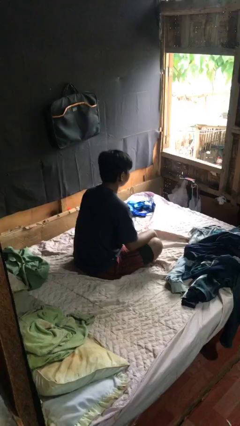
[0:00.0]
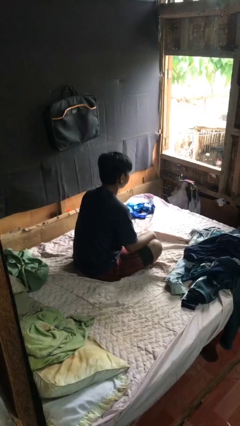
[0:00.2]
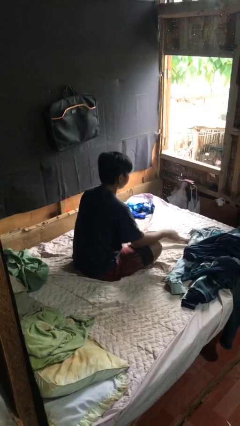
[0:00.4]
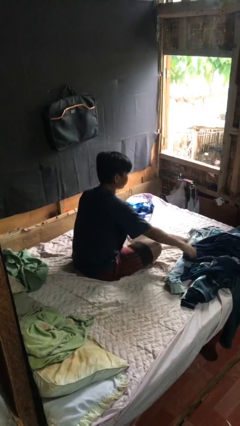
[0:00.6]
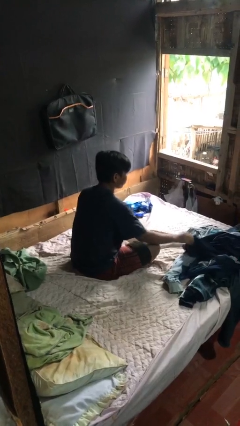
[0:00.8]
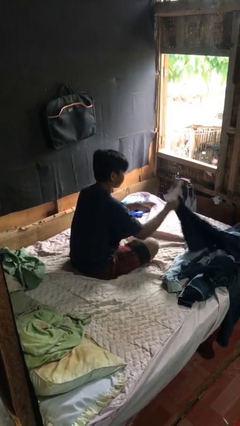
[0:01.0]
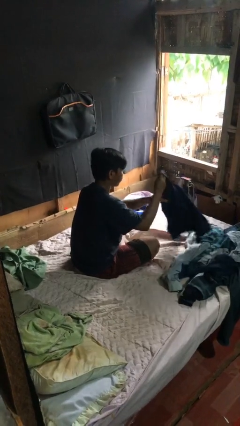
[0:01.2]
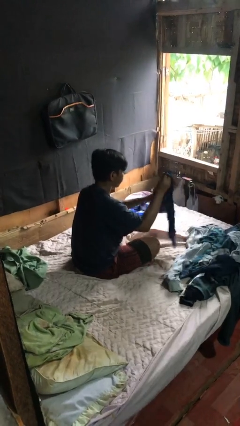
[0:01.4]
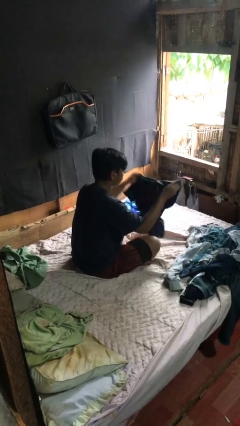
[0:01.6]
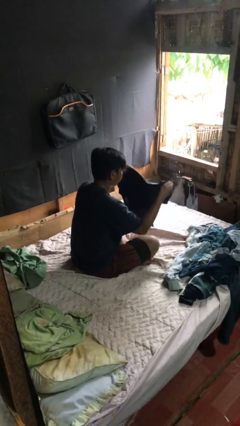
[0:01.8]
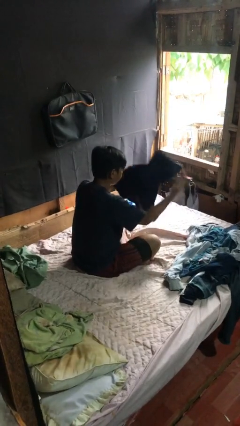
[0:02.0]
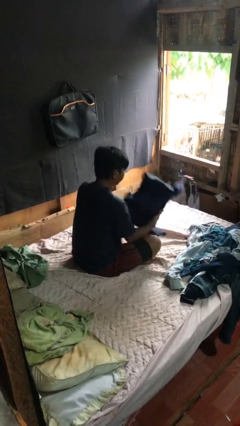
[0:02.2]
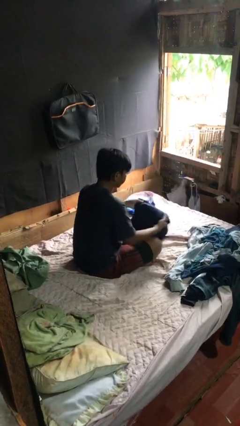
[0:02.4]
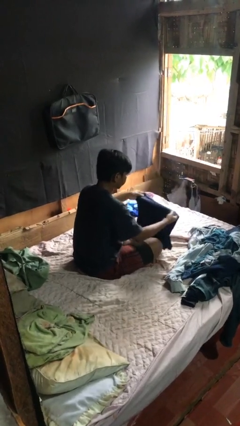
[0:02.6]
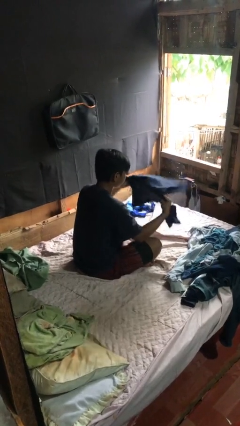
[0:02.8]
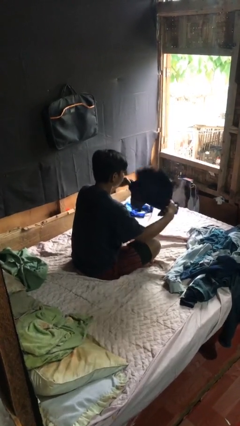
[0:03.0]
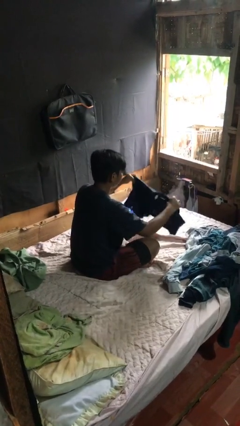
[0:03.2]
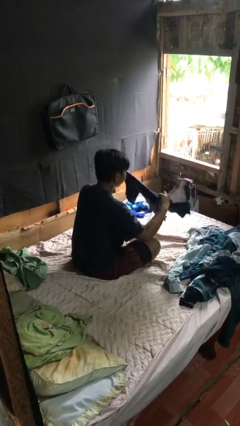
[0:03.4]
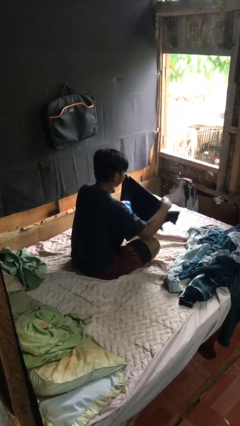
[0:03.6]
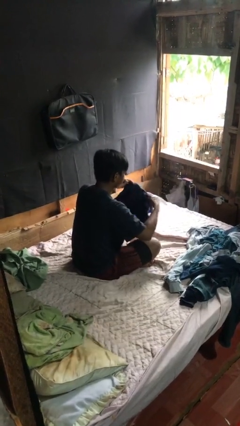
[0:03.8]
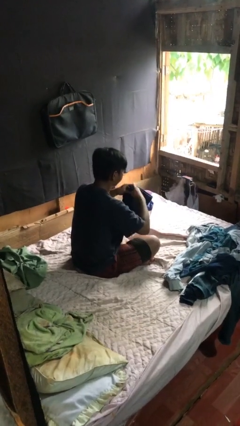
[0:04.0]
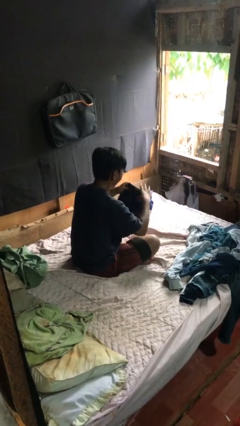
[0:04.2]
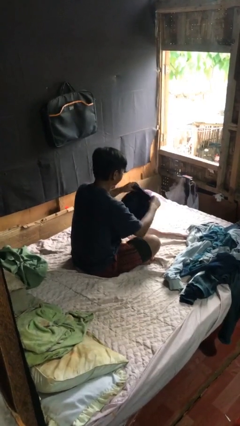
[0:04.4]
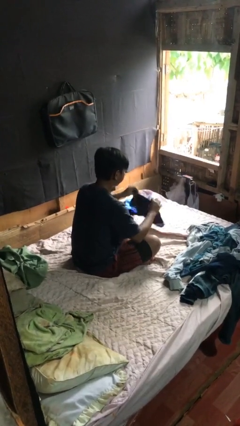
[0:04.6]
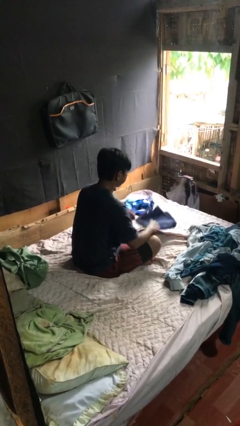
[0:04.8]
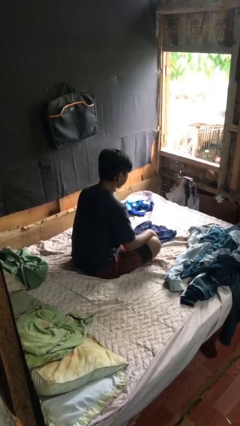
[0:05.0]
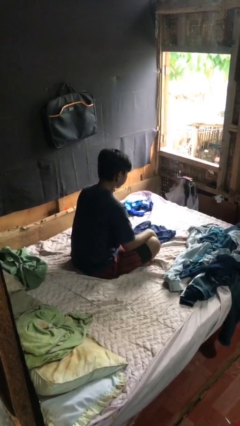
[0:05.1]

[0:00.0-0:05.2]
person folds shirt

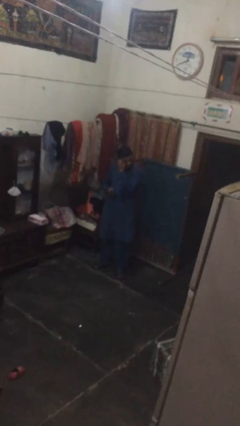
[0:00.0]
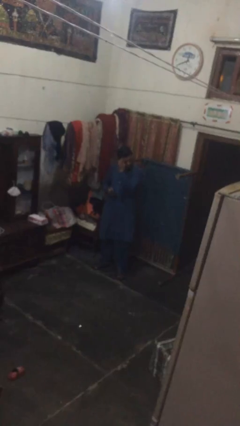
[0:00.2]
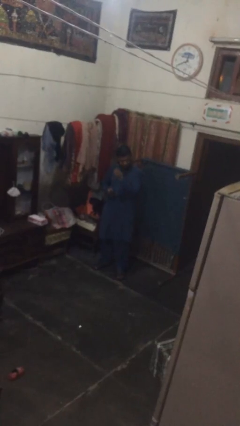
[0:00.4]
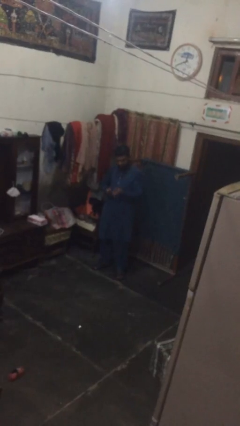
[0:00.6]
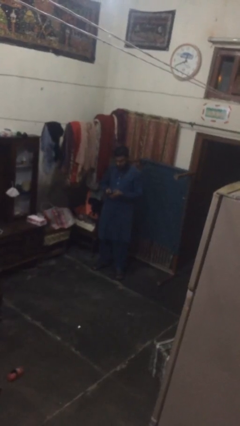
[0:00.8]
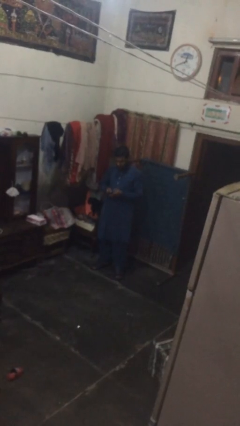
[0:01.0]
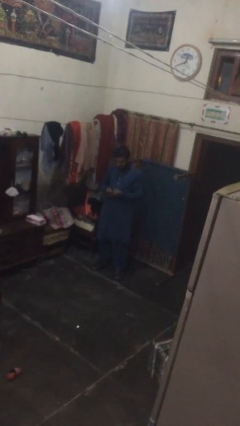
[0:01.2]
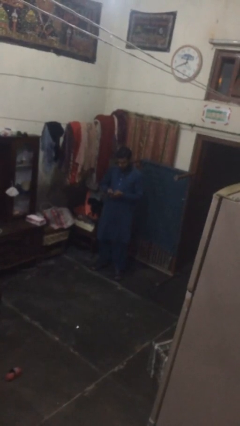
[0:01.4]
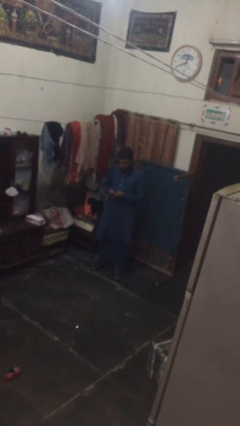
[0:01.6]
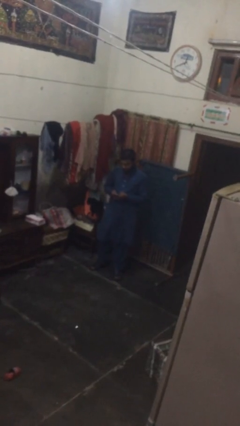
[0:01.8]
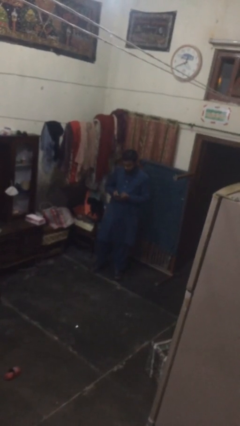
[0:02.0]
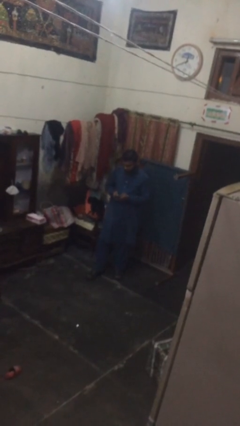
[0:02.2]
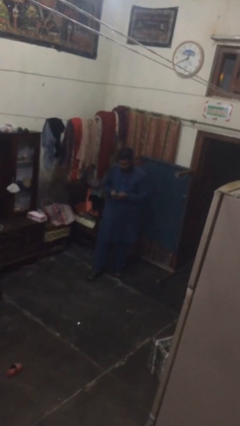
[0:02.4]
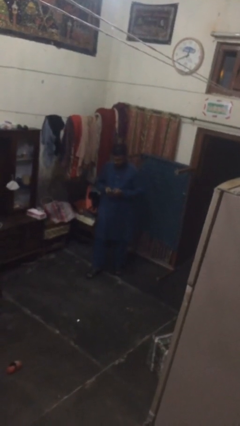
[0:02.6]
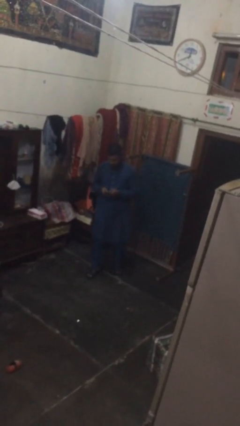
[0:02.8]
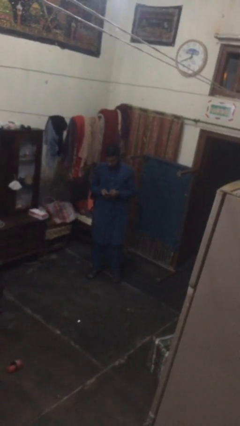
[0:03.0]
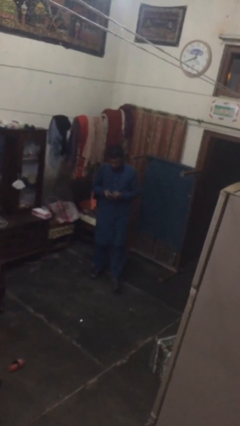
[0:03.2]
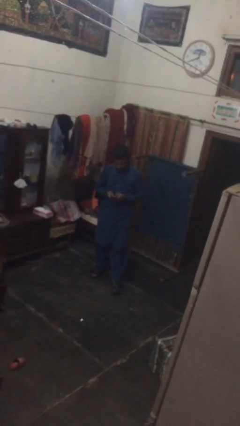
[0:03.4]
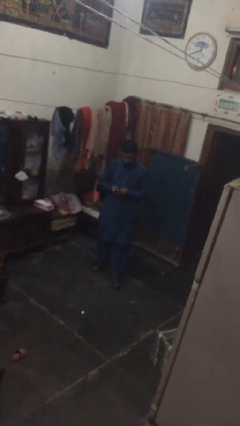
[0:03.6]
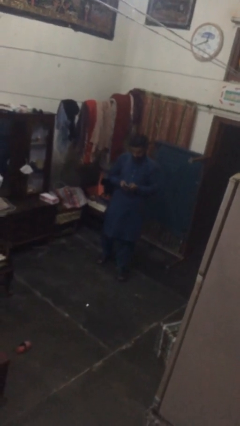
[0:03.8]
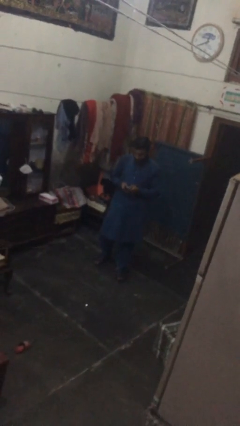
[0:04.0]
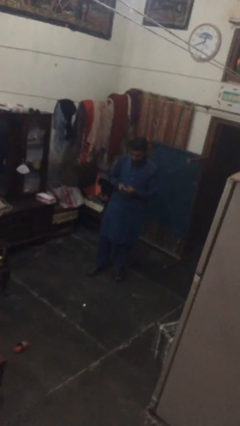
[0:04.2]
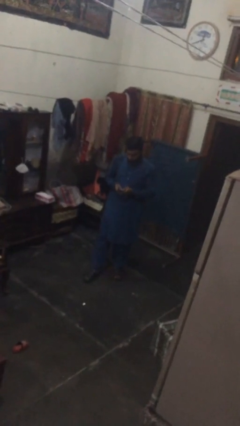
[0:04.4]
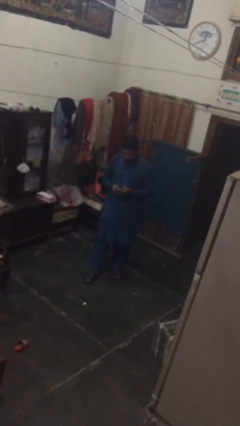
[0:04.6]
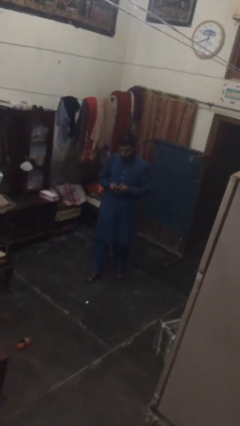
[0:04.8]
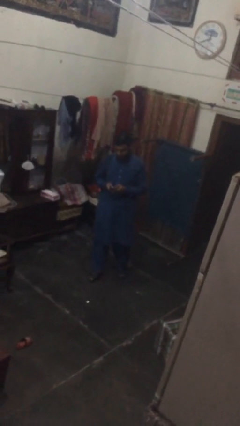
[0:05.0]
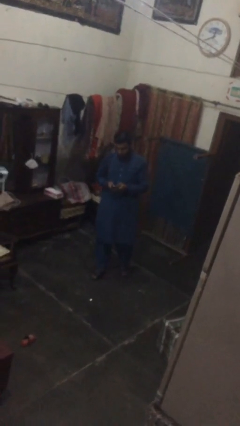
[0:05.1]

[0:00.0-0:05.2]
person texts on phone

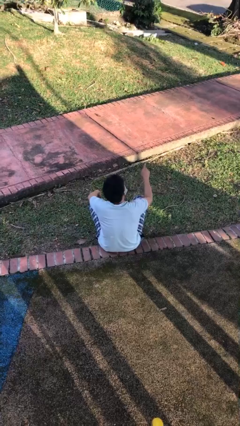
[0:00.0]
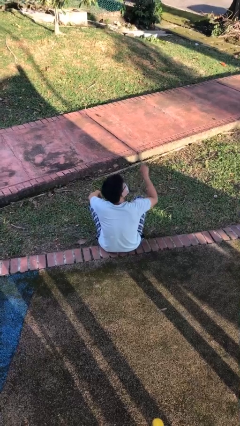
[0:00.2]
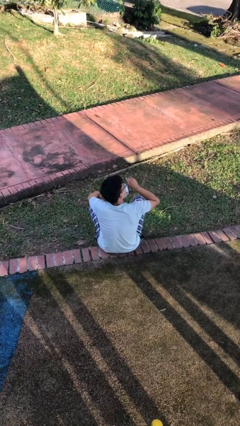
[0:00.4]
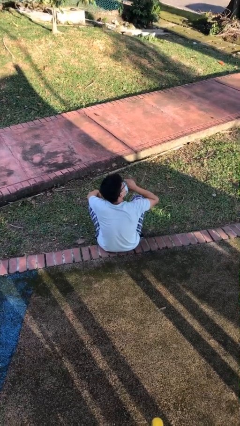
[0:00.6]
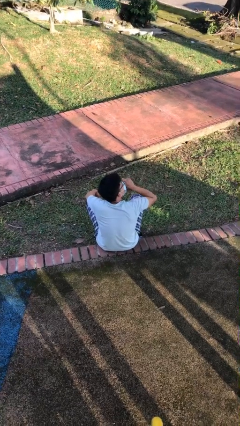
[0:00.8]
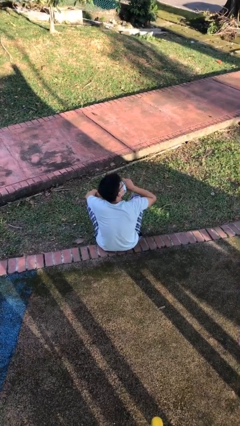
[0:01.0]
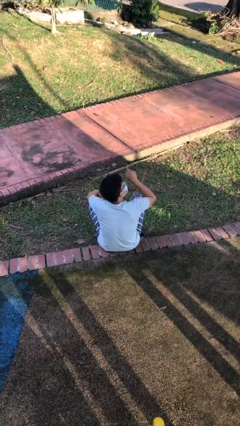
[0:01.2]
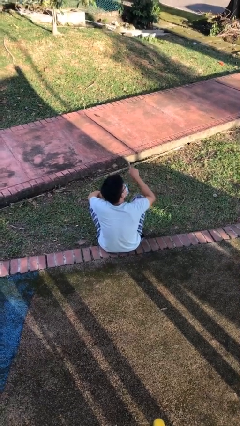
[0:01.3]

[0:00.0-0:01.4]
person gestures be quiet

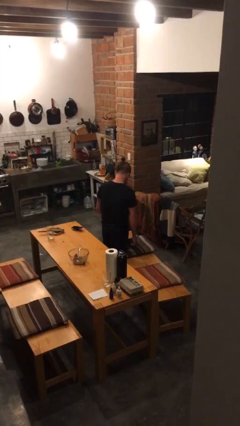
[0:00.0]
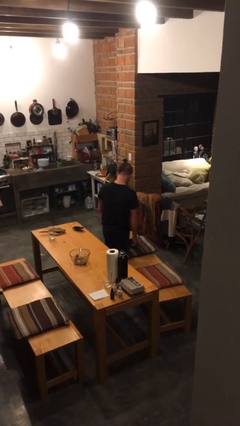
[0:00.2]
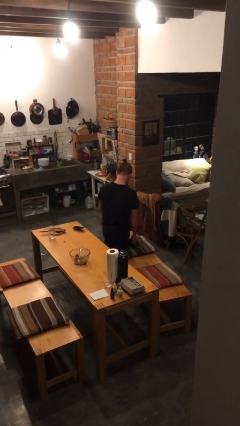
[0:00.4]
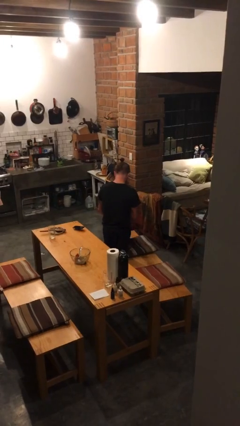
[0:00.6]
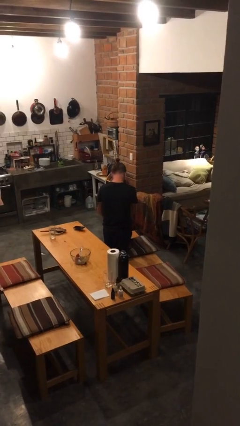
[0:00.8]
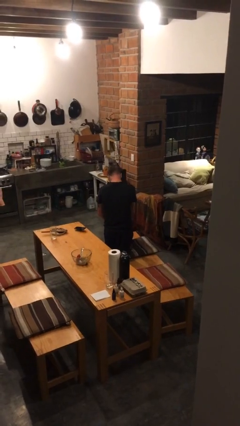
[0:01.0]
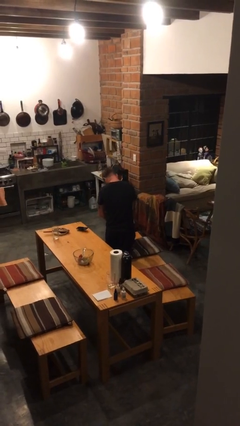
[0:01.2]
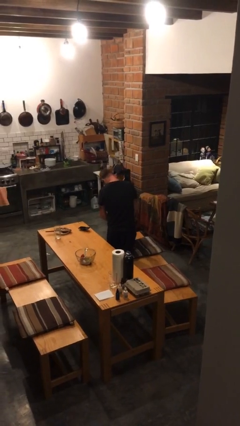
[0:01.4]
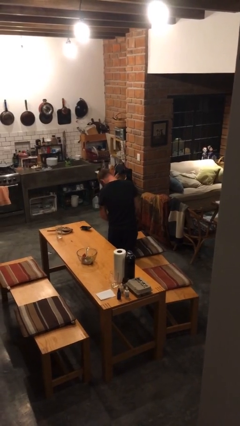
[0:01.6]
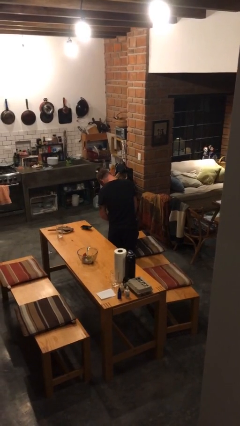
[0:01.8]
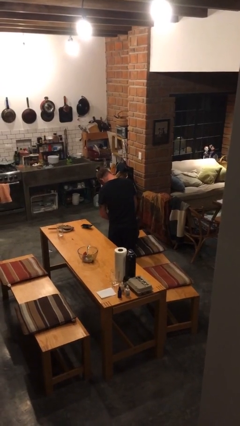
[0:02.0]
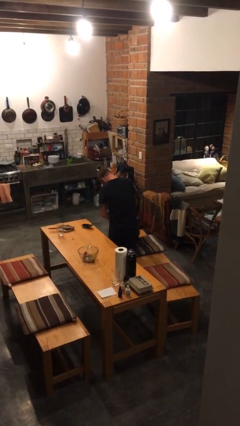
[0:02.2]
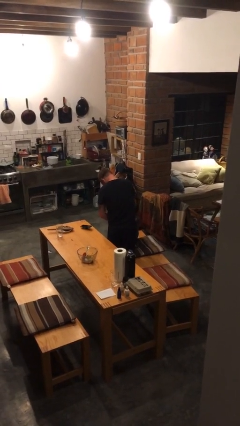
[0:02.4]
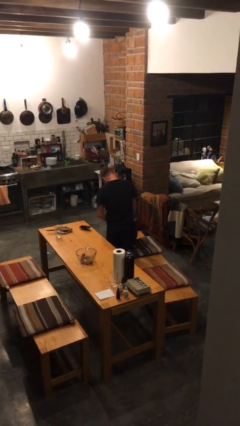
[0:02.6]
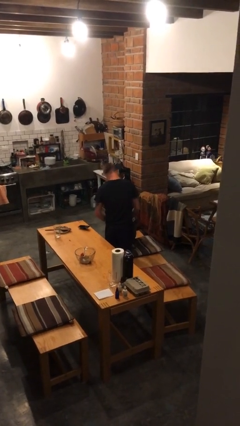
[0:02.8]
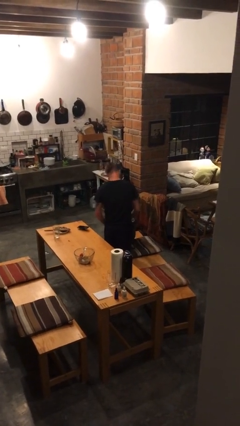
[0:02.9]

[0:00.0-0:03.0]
person searches in bag

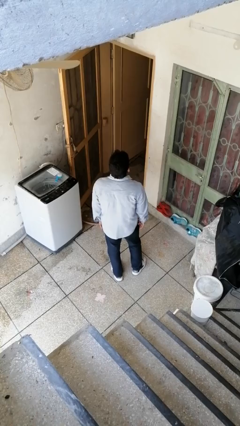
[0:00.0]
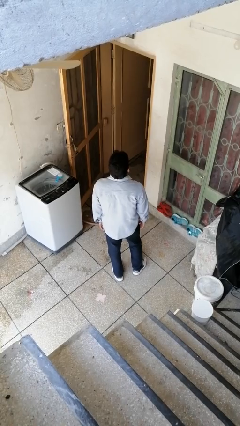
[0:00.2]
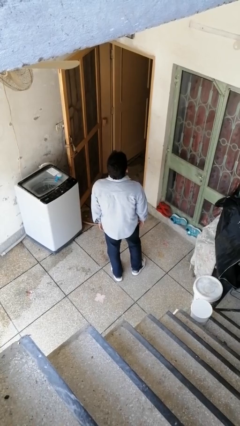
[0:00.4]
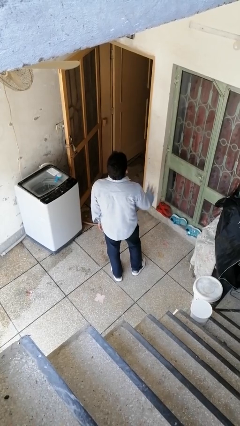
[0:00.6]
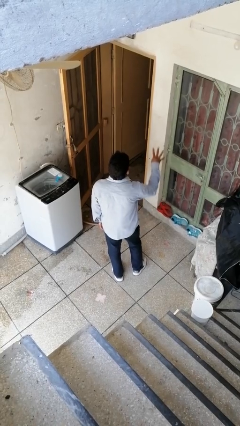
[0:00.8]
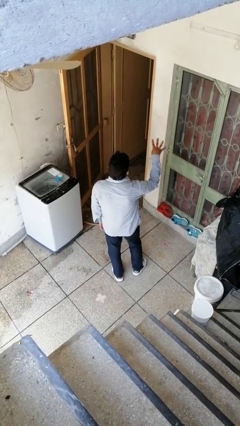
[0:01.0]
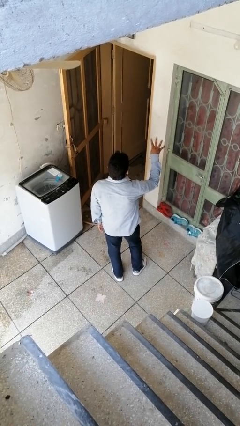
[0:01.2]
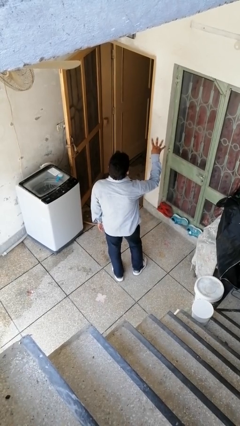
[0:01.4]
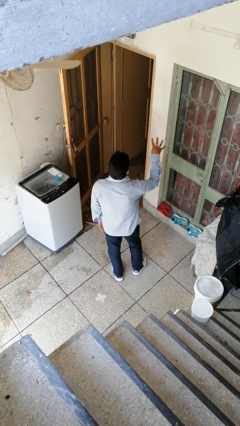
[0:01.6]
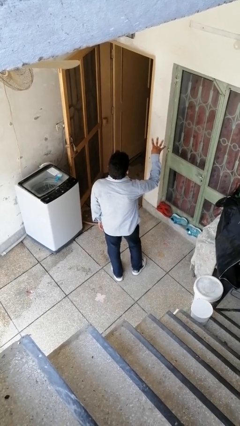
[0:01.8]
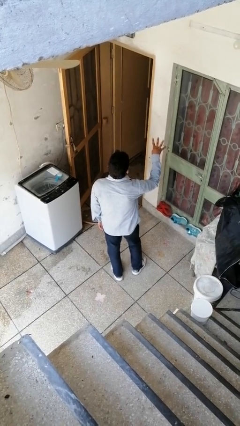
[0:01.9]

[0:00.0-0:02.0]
person gestures number four

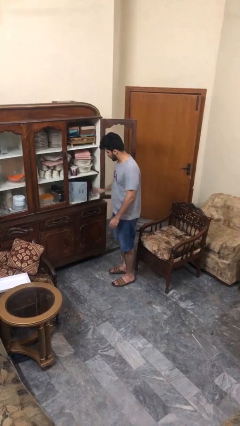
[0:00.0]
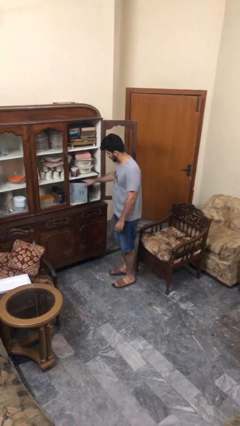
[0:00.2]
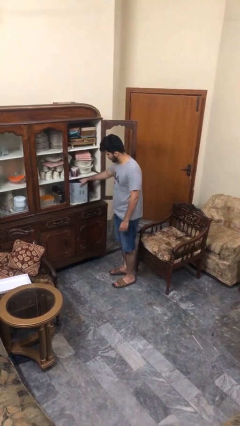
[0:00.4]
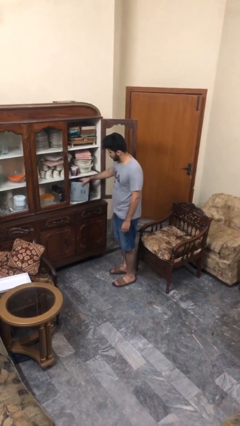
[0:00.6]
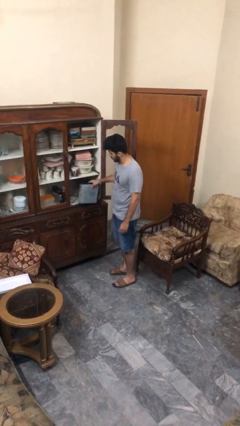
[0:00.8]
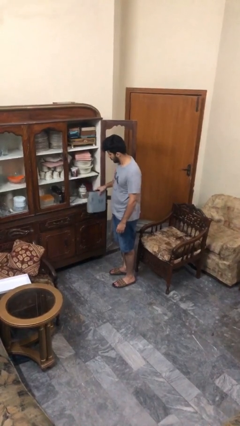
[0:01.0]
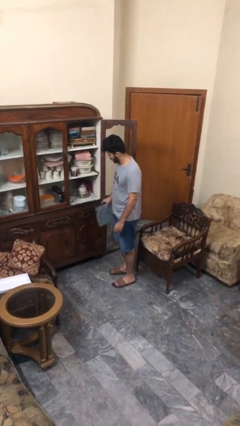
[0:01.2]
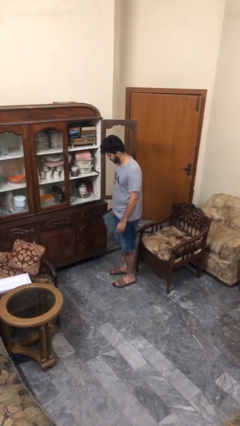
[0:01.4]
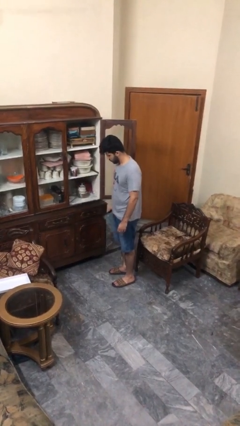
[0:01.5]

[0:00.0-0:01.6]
person picks up object from cabinet
